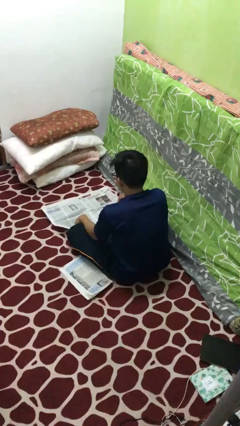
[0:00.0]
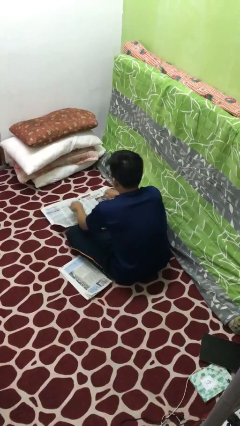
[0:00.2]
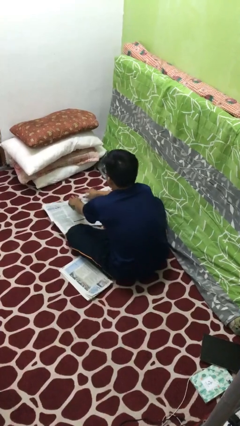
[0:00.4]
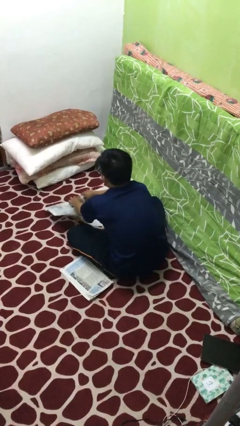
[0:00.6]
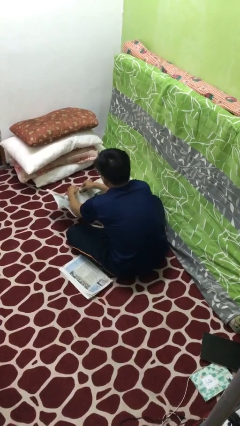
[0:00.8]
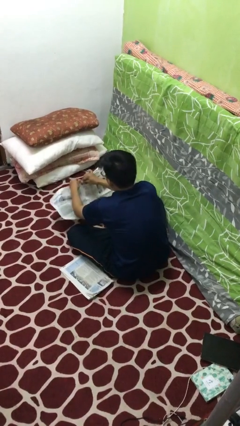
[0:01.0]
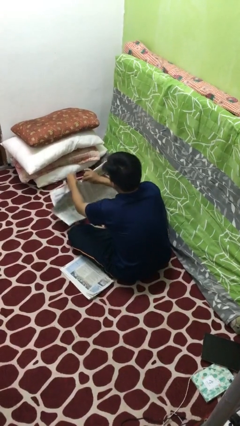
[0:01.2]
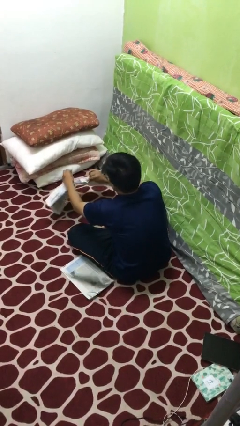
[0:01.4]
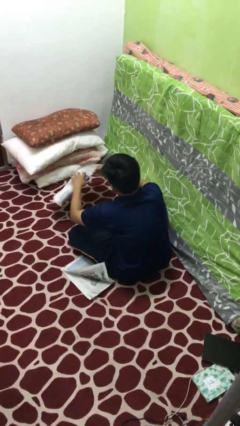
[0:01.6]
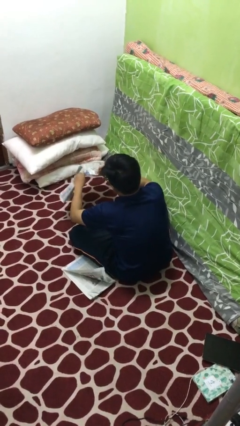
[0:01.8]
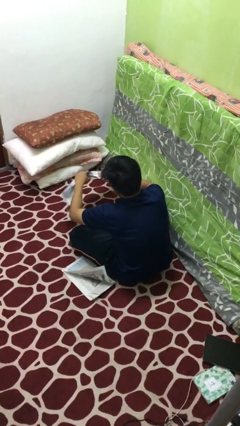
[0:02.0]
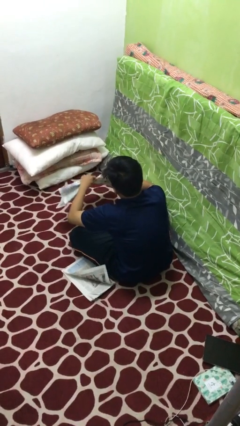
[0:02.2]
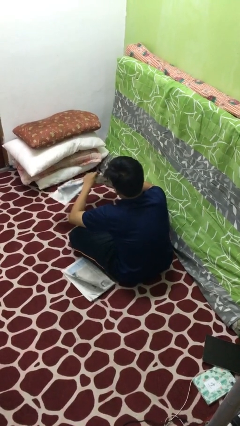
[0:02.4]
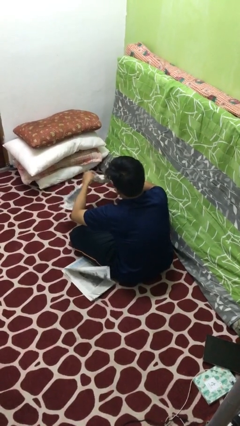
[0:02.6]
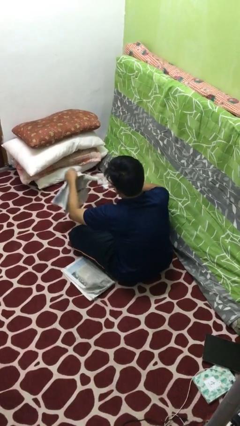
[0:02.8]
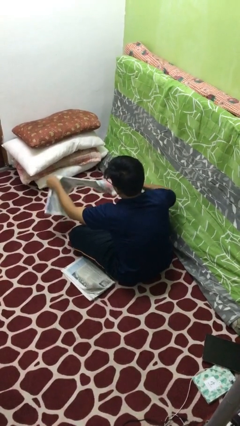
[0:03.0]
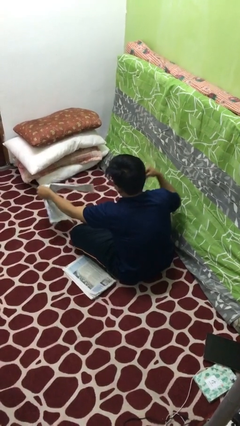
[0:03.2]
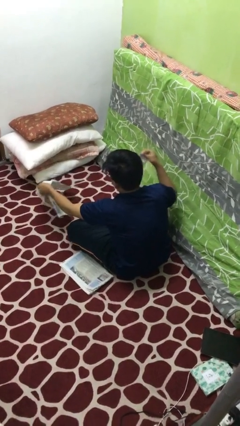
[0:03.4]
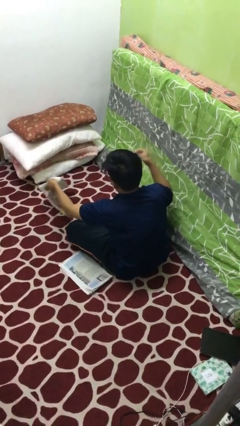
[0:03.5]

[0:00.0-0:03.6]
person tears paper

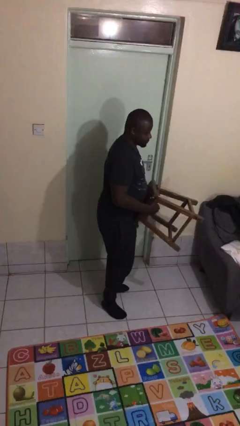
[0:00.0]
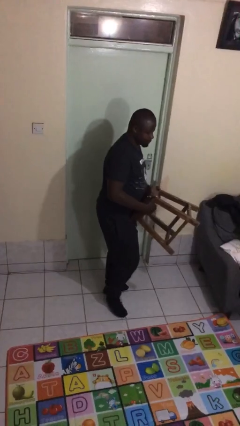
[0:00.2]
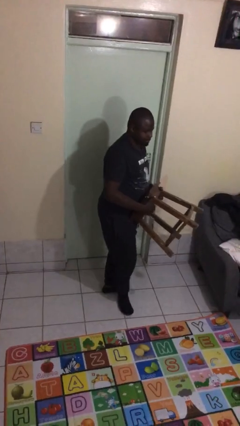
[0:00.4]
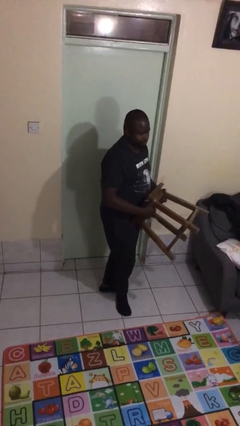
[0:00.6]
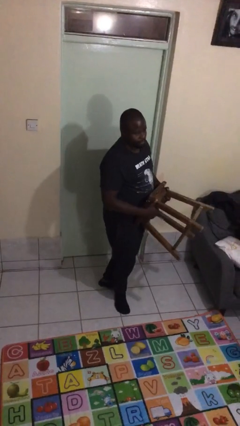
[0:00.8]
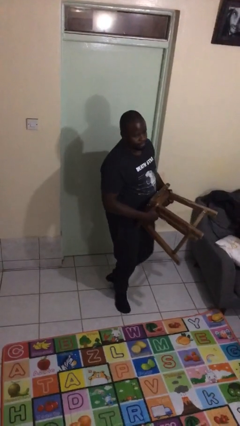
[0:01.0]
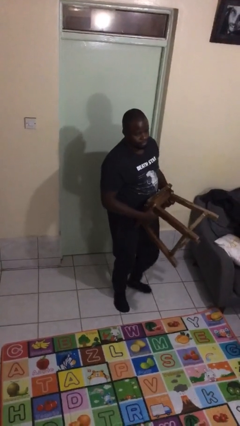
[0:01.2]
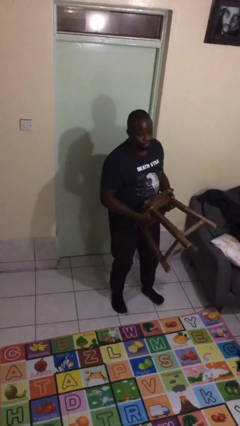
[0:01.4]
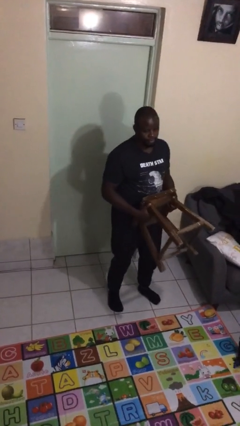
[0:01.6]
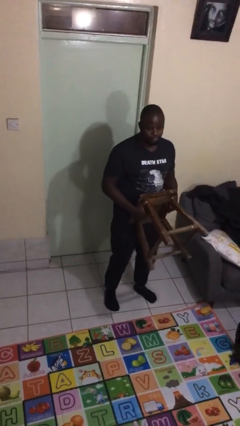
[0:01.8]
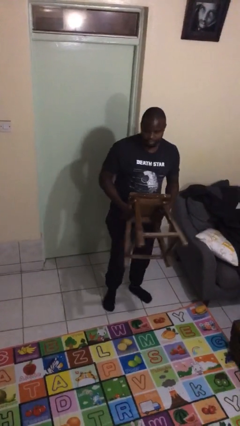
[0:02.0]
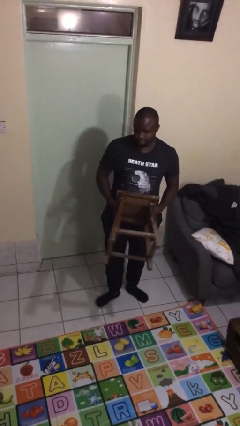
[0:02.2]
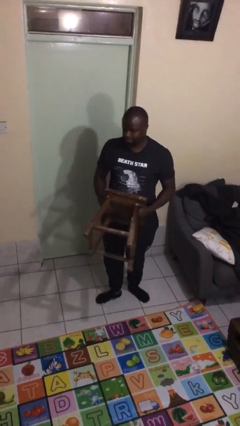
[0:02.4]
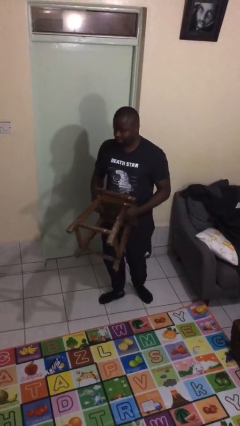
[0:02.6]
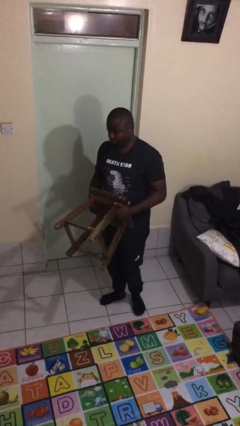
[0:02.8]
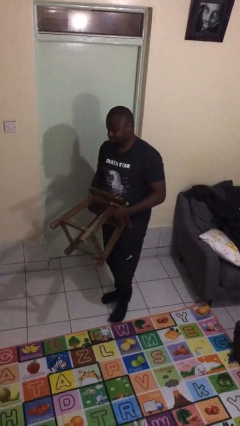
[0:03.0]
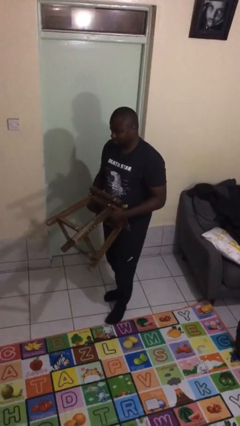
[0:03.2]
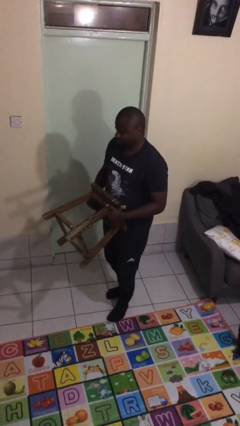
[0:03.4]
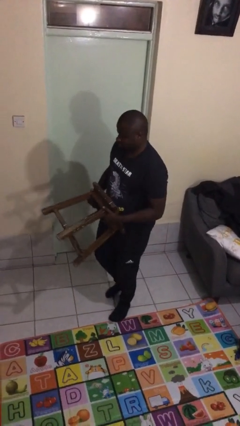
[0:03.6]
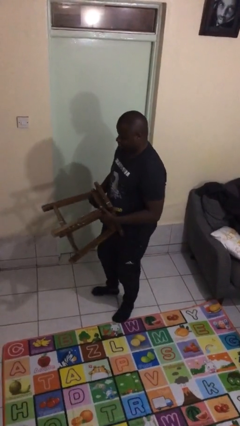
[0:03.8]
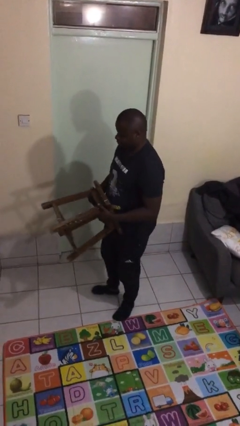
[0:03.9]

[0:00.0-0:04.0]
person carries furniture

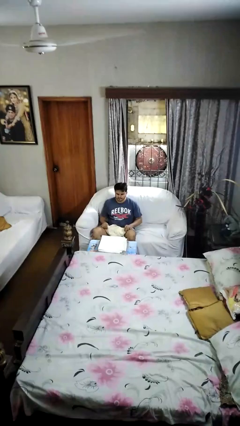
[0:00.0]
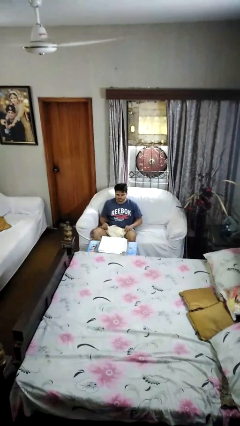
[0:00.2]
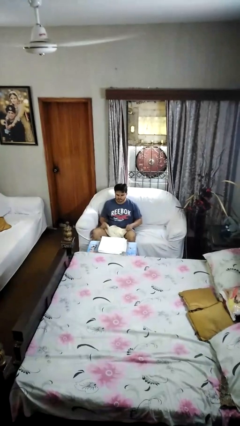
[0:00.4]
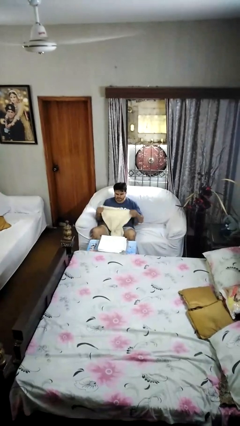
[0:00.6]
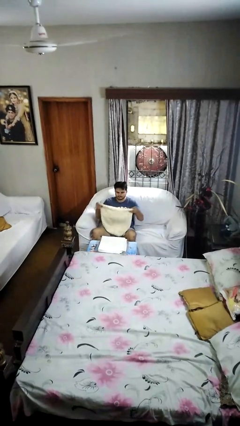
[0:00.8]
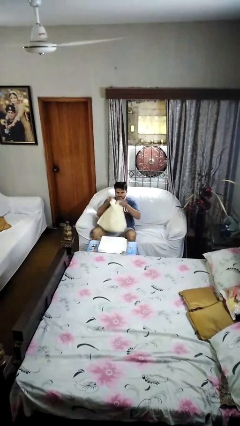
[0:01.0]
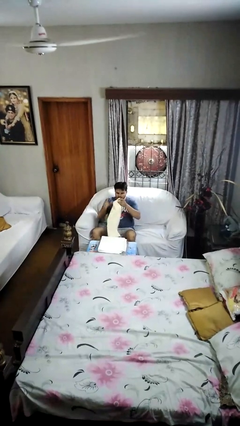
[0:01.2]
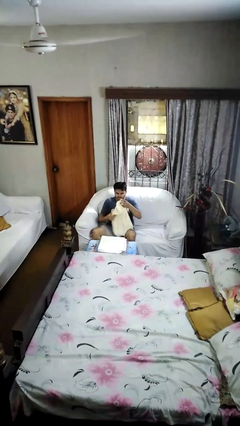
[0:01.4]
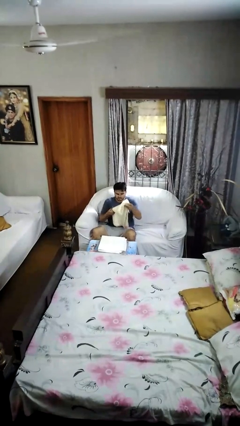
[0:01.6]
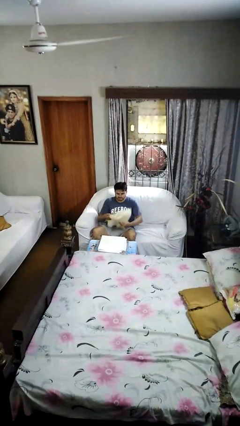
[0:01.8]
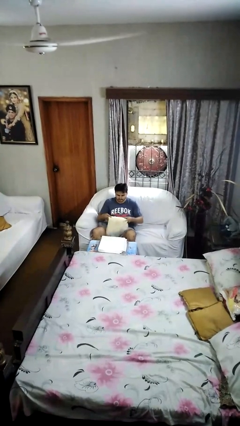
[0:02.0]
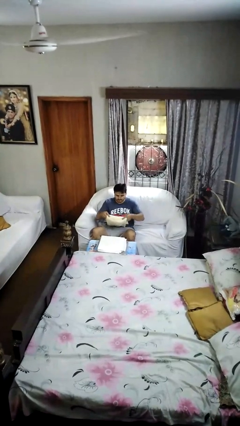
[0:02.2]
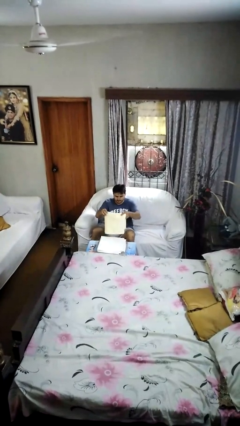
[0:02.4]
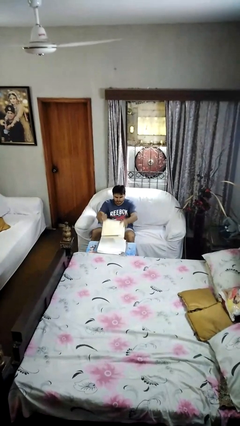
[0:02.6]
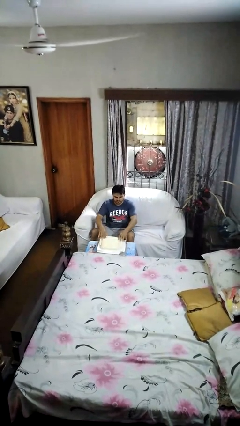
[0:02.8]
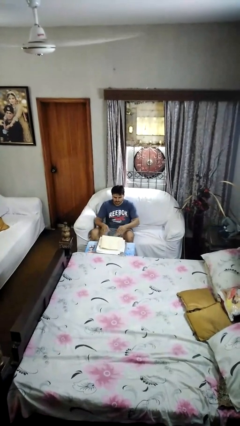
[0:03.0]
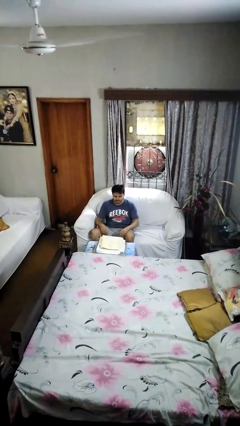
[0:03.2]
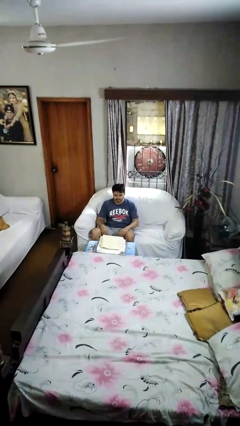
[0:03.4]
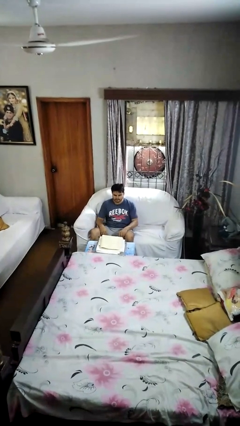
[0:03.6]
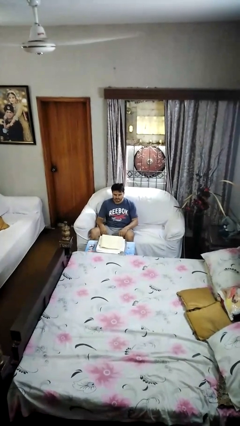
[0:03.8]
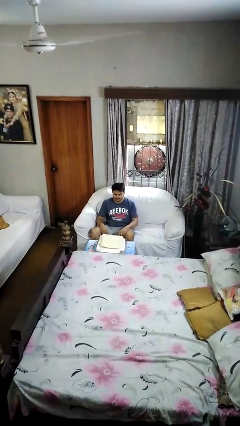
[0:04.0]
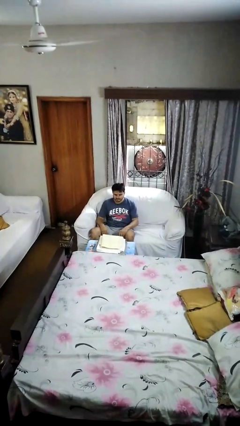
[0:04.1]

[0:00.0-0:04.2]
person folds towel

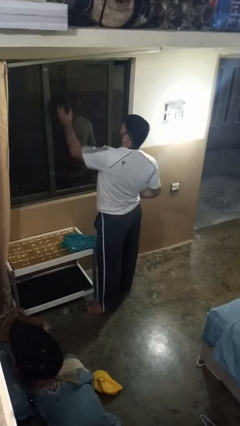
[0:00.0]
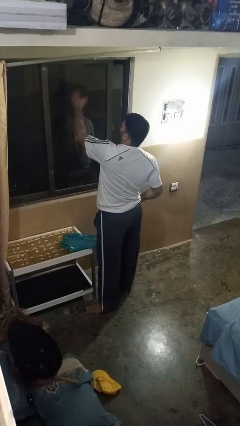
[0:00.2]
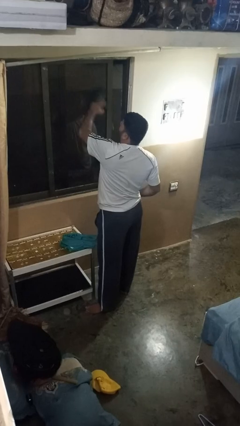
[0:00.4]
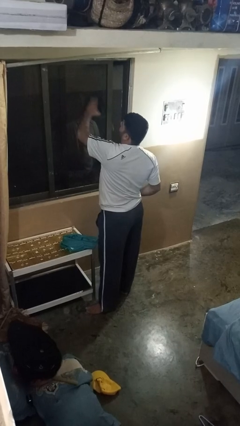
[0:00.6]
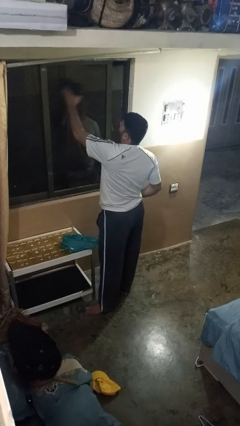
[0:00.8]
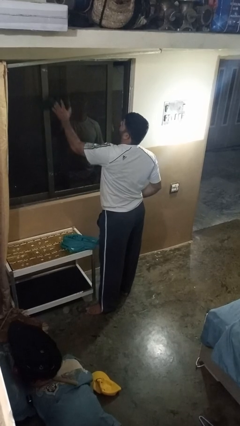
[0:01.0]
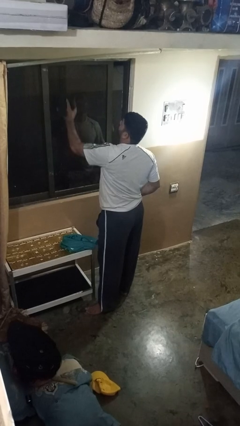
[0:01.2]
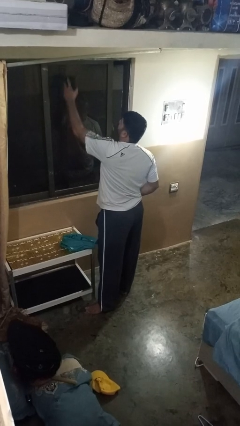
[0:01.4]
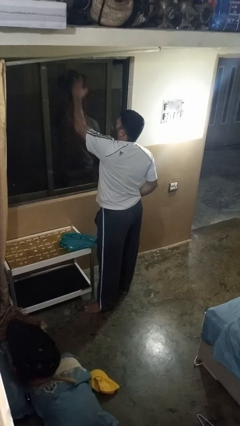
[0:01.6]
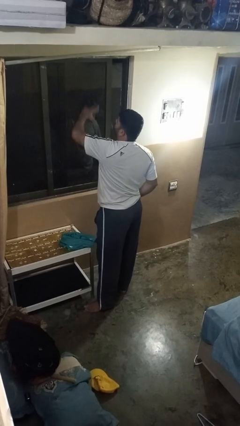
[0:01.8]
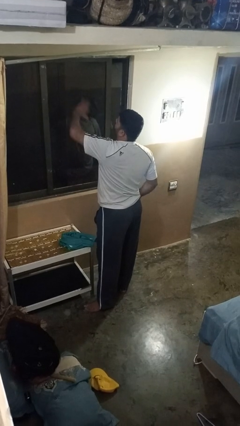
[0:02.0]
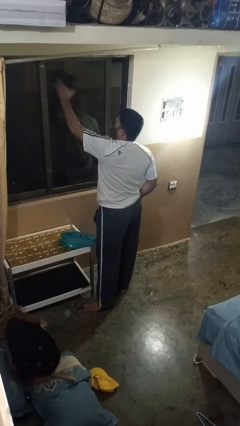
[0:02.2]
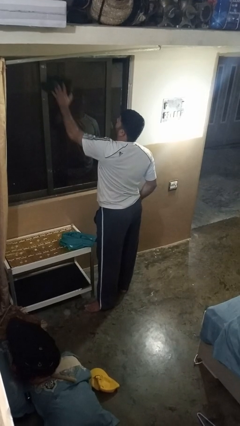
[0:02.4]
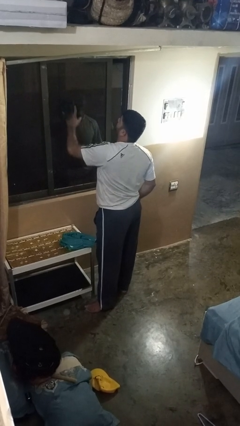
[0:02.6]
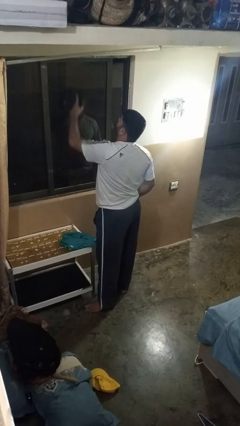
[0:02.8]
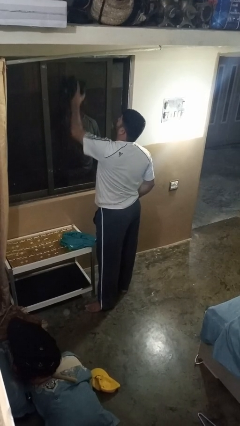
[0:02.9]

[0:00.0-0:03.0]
person washes window

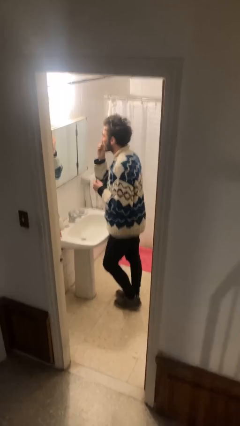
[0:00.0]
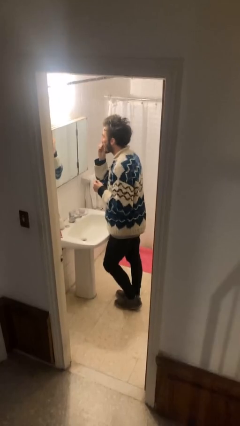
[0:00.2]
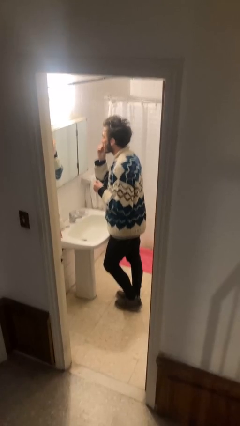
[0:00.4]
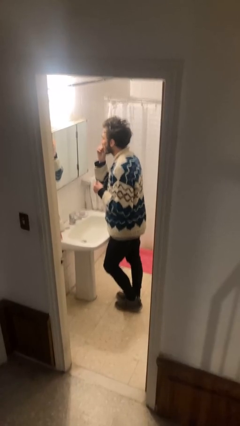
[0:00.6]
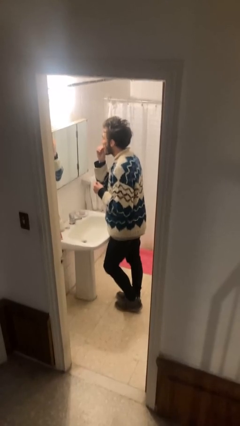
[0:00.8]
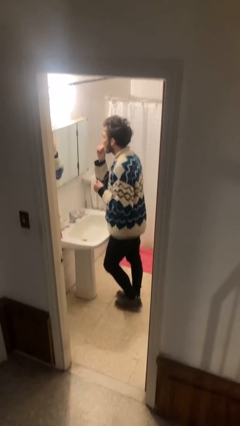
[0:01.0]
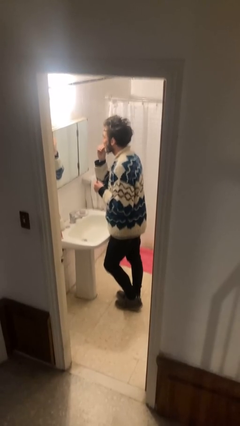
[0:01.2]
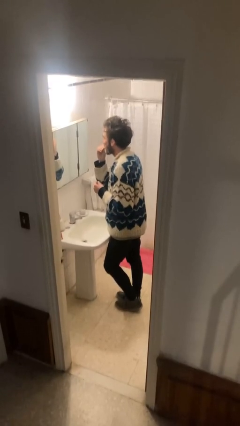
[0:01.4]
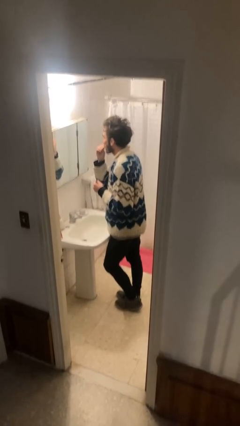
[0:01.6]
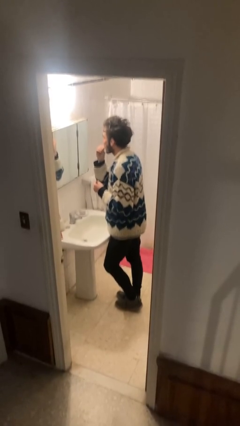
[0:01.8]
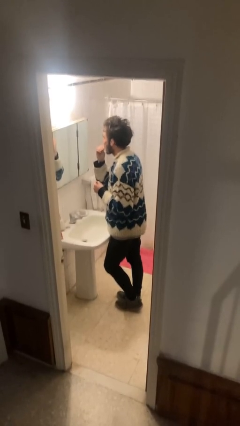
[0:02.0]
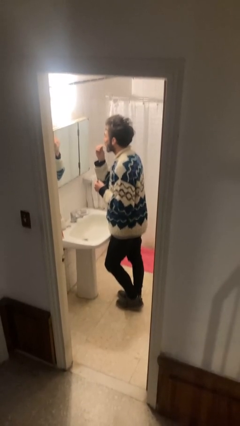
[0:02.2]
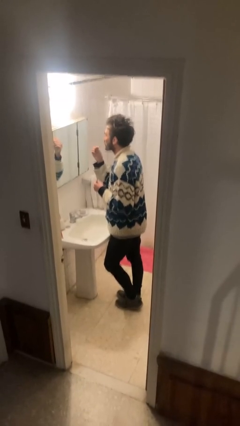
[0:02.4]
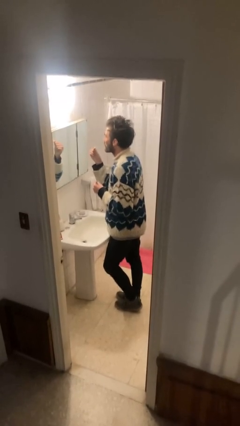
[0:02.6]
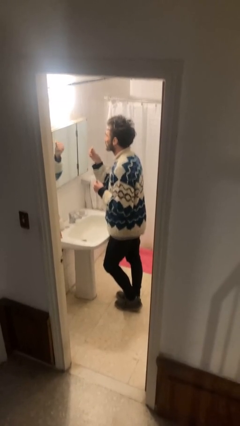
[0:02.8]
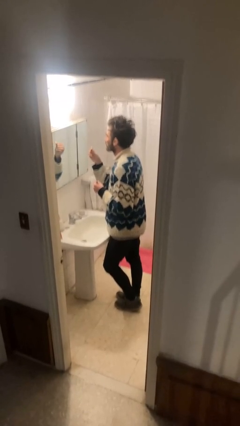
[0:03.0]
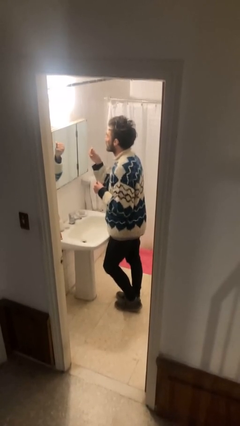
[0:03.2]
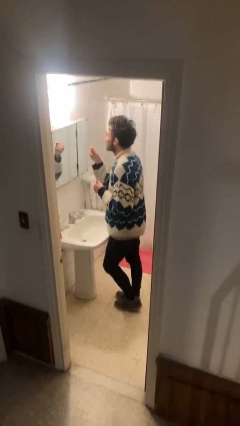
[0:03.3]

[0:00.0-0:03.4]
person applies lip makeup
